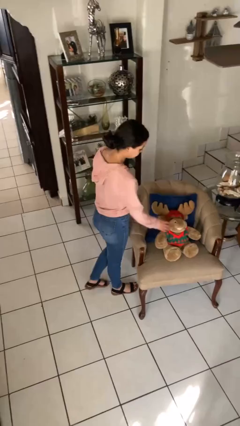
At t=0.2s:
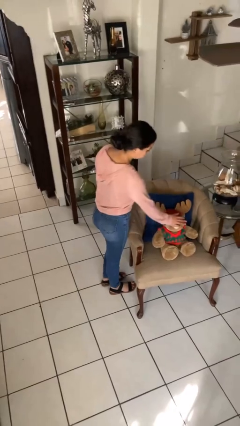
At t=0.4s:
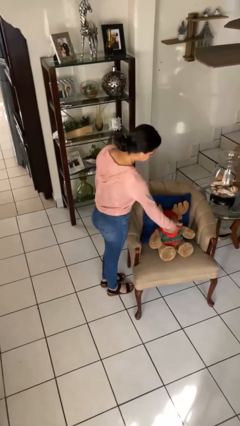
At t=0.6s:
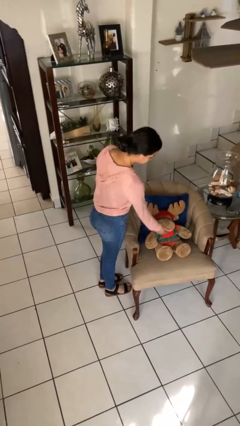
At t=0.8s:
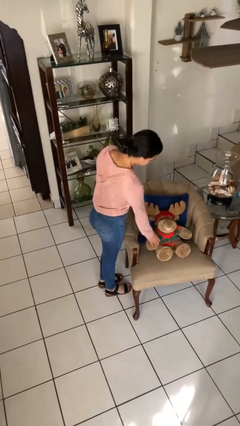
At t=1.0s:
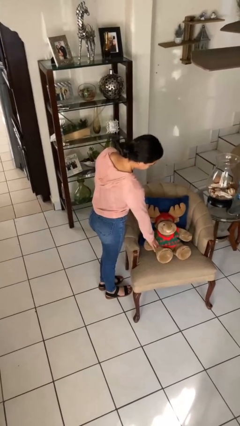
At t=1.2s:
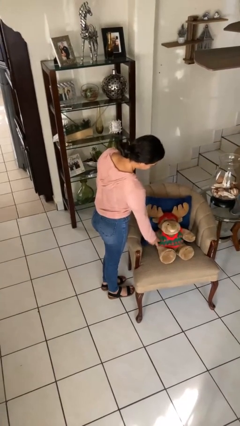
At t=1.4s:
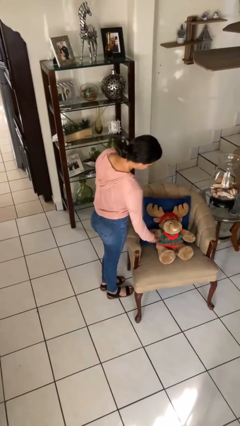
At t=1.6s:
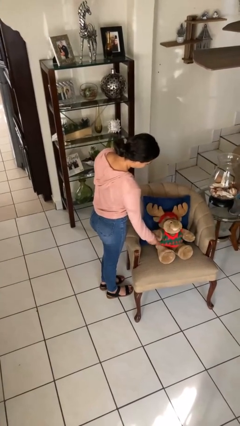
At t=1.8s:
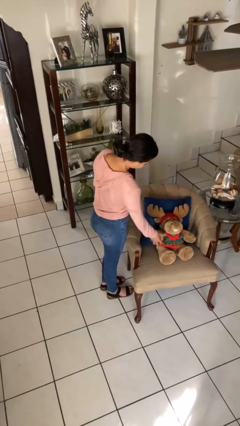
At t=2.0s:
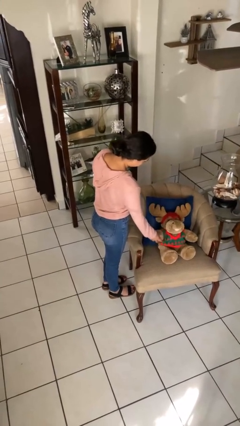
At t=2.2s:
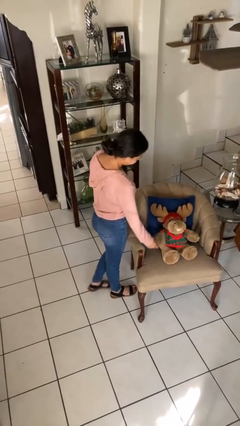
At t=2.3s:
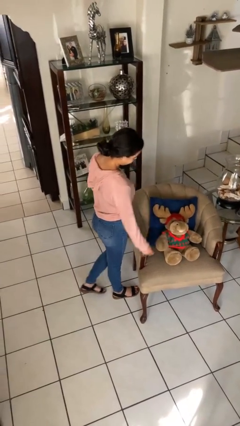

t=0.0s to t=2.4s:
person waves hand over object

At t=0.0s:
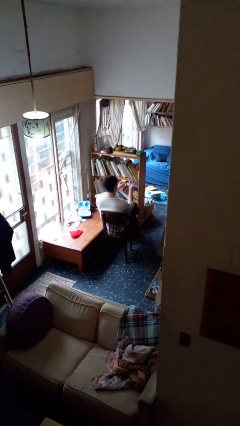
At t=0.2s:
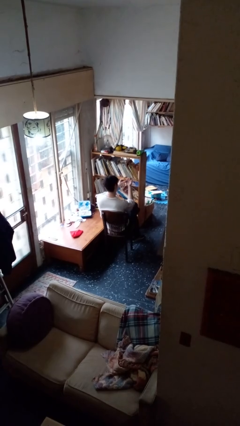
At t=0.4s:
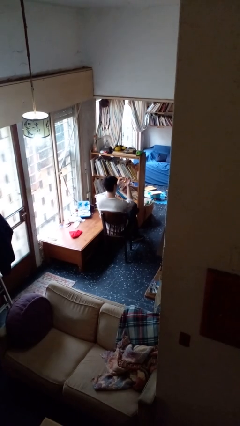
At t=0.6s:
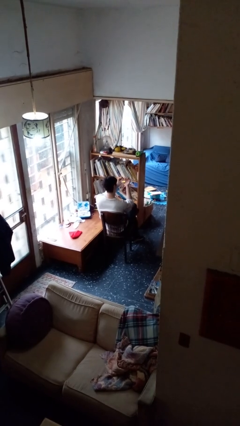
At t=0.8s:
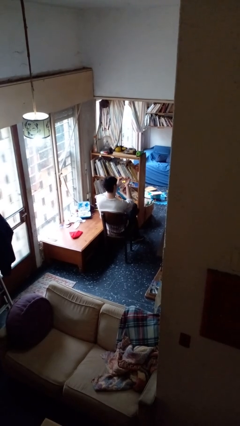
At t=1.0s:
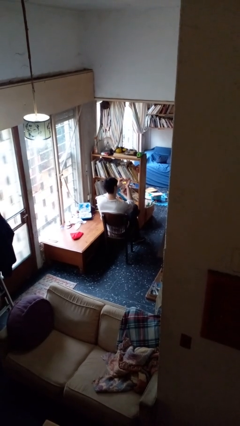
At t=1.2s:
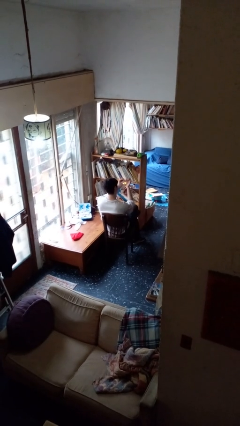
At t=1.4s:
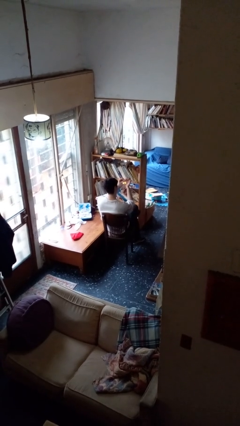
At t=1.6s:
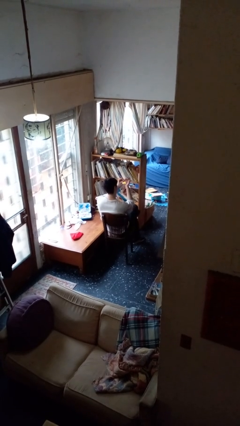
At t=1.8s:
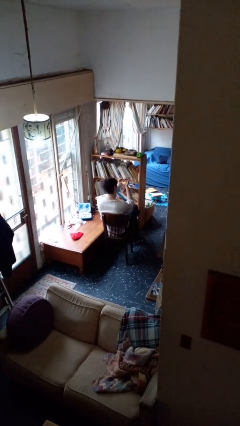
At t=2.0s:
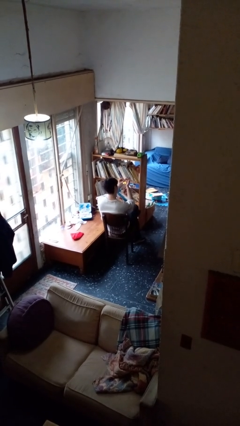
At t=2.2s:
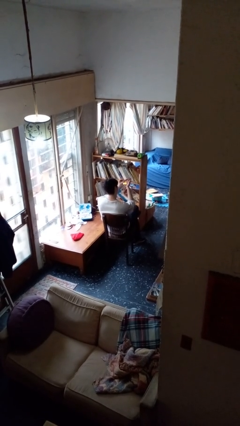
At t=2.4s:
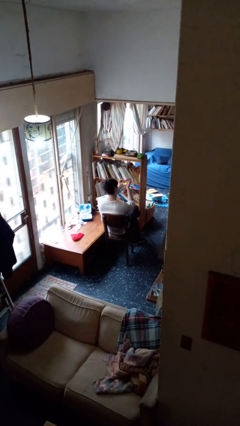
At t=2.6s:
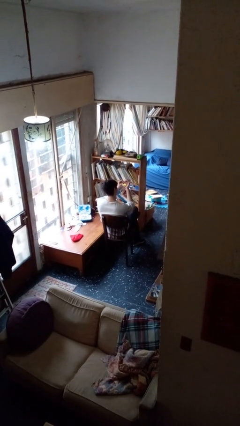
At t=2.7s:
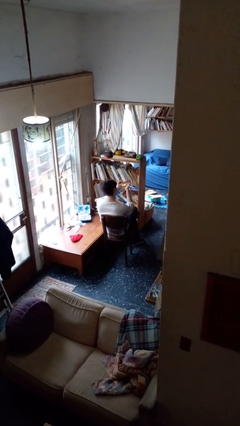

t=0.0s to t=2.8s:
person files fingernails

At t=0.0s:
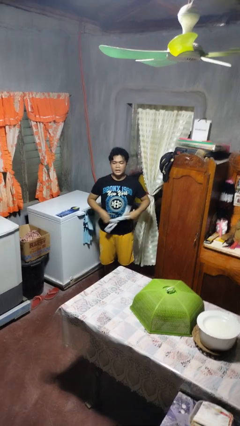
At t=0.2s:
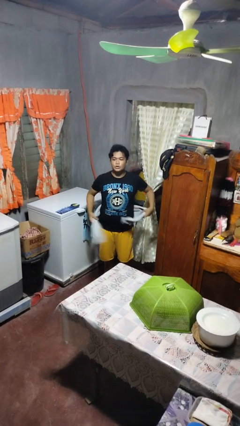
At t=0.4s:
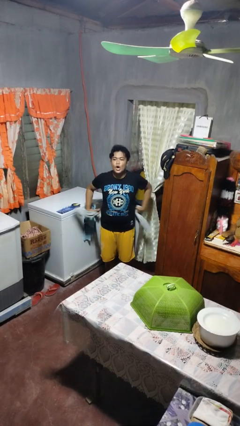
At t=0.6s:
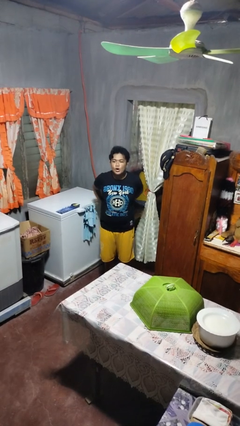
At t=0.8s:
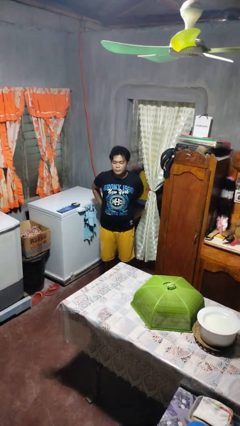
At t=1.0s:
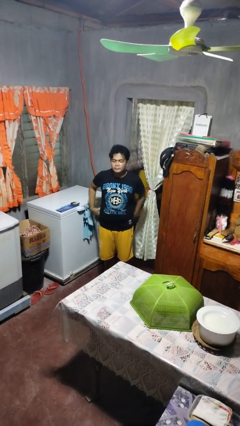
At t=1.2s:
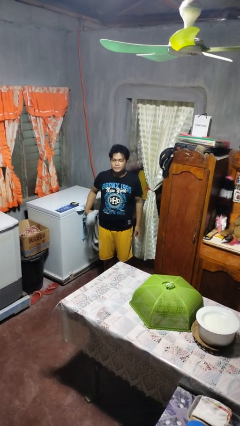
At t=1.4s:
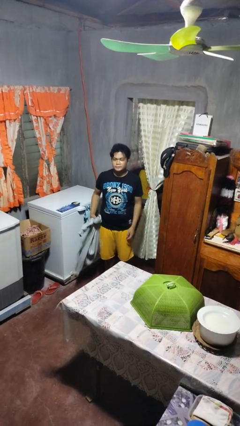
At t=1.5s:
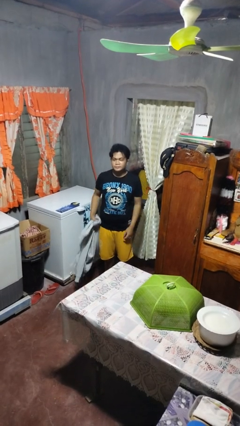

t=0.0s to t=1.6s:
person unties jacket around waist

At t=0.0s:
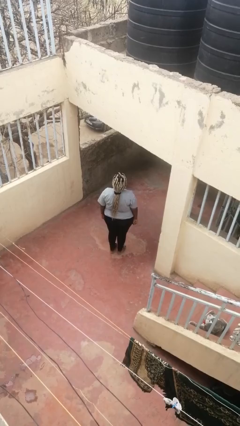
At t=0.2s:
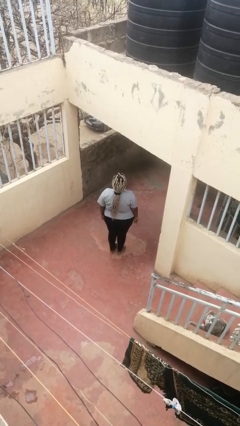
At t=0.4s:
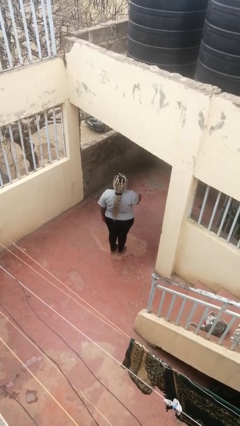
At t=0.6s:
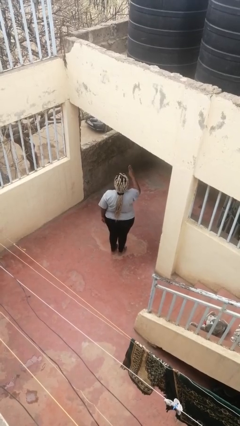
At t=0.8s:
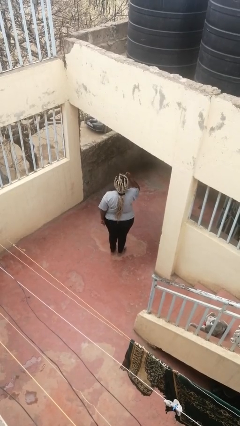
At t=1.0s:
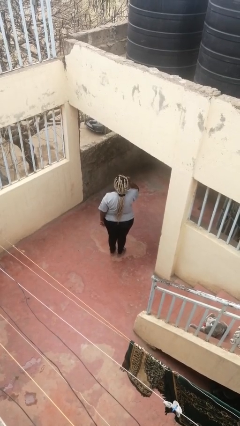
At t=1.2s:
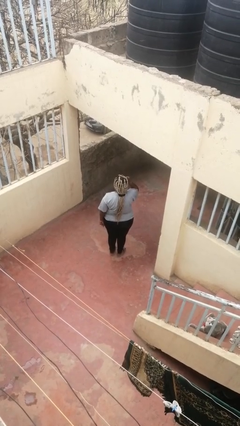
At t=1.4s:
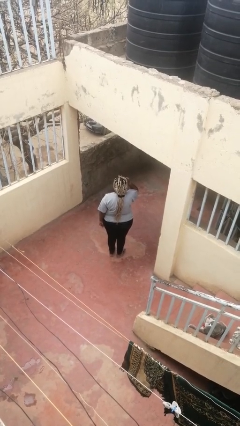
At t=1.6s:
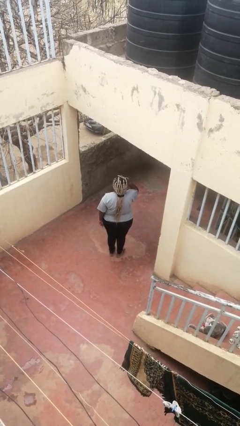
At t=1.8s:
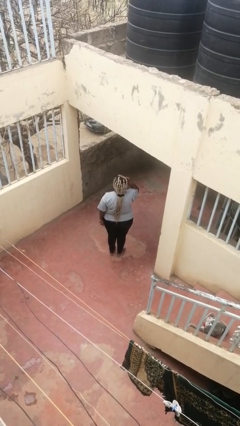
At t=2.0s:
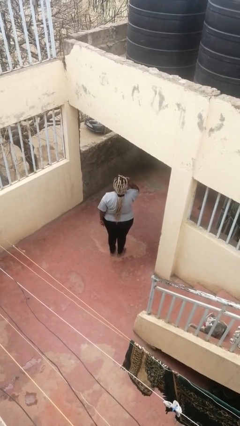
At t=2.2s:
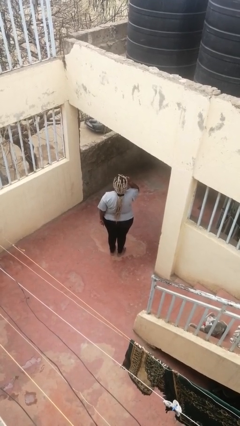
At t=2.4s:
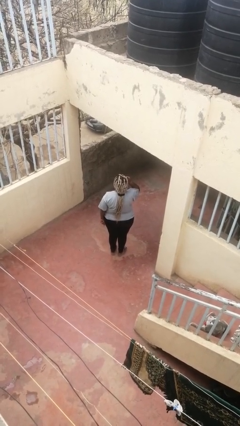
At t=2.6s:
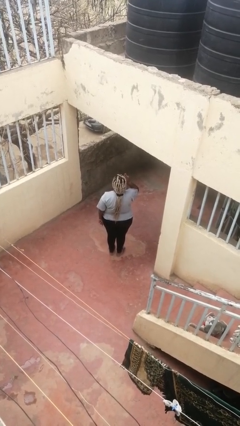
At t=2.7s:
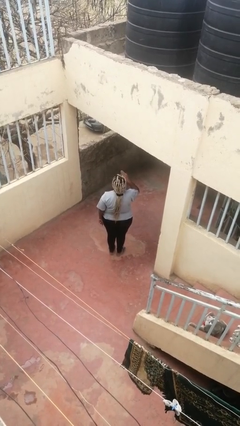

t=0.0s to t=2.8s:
person salutes

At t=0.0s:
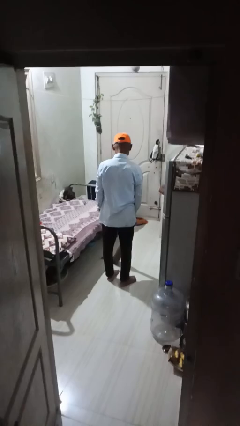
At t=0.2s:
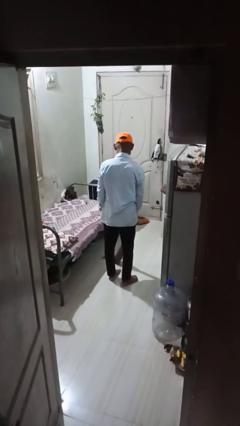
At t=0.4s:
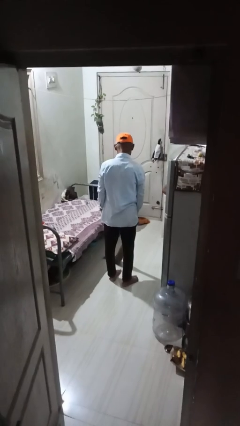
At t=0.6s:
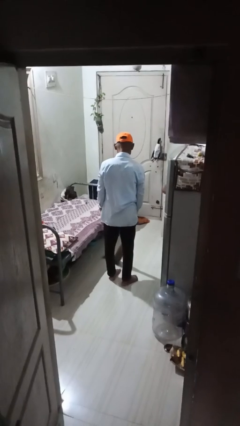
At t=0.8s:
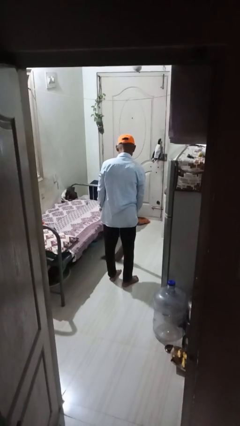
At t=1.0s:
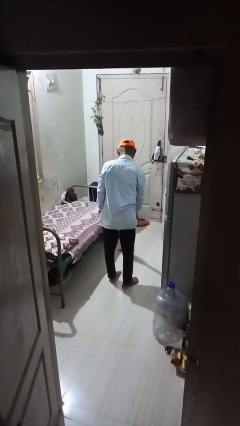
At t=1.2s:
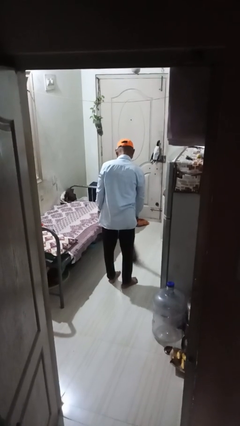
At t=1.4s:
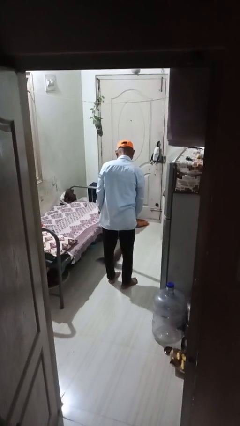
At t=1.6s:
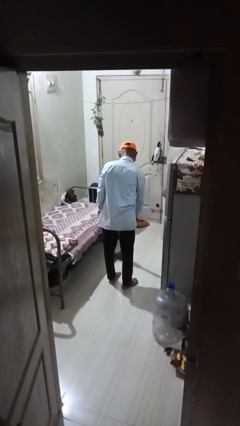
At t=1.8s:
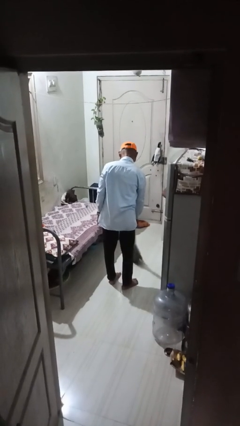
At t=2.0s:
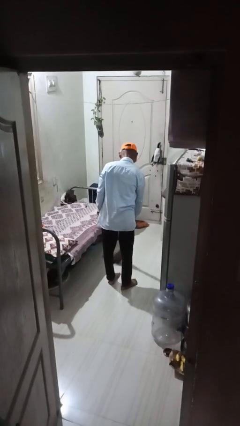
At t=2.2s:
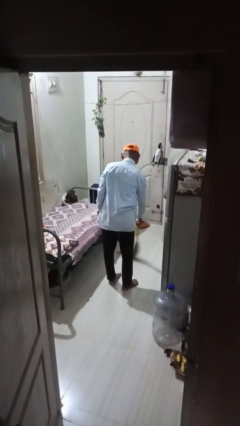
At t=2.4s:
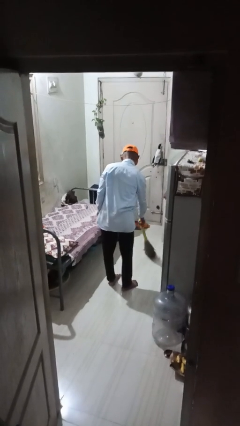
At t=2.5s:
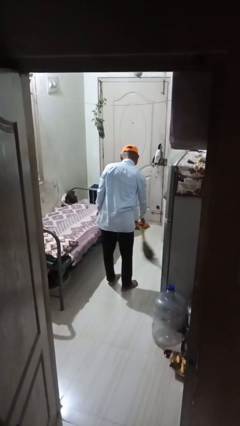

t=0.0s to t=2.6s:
person mops

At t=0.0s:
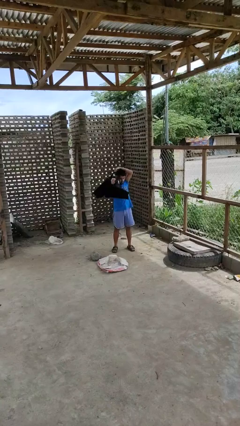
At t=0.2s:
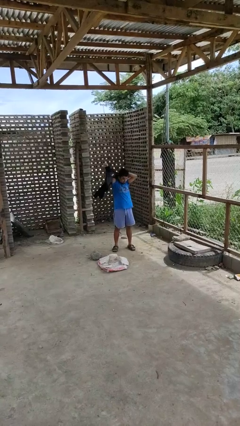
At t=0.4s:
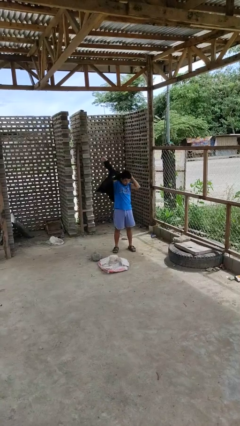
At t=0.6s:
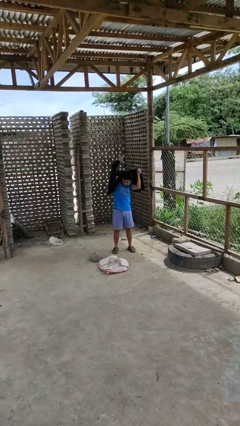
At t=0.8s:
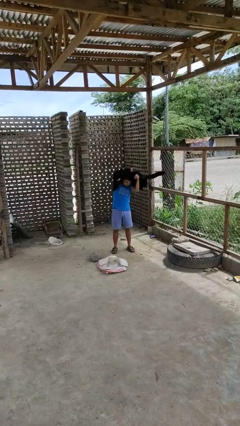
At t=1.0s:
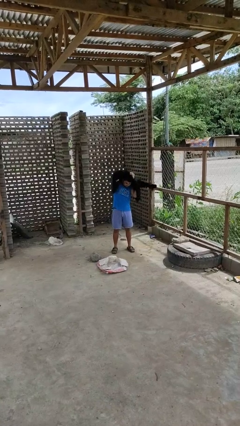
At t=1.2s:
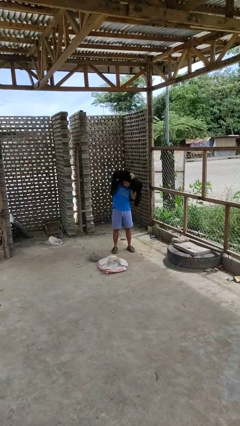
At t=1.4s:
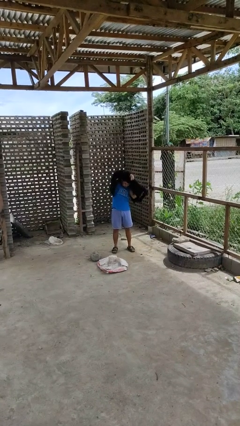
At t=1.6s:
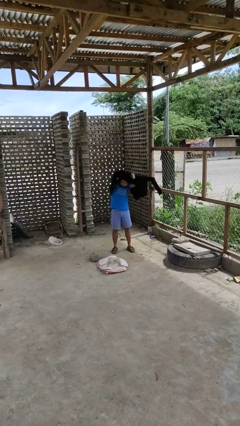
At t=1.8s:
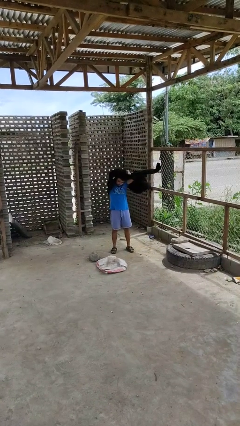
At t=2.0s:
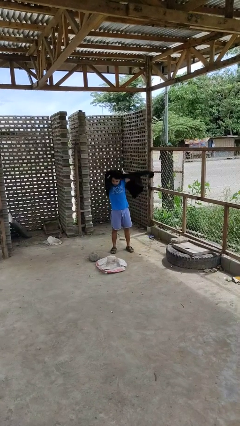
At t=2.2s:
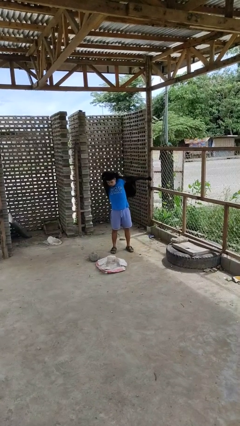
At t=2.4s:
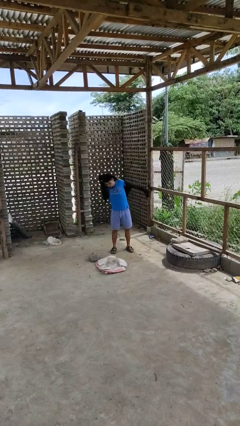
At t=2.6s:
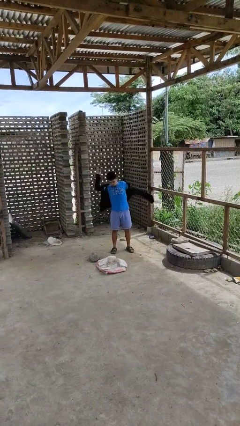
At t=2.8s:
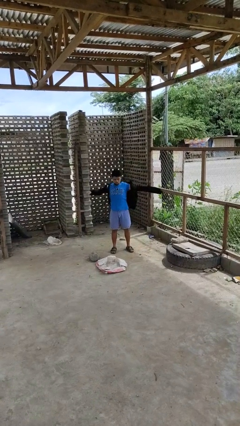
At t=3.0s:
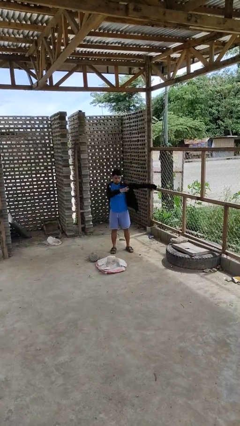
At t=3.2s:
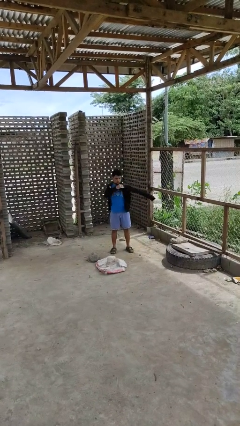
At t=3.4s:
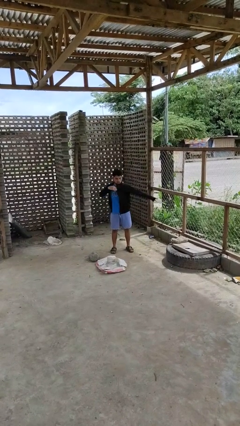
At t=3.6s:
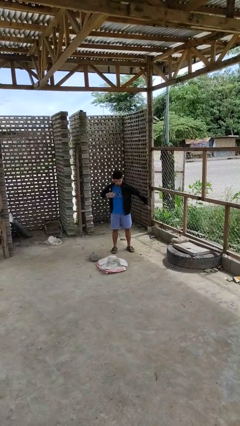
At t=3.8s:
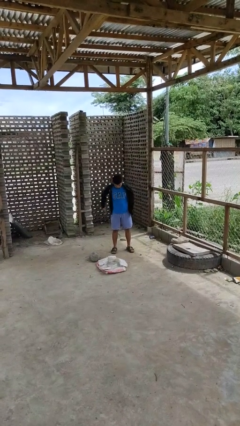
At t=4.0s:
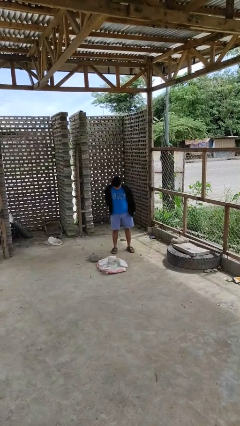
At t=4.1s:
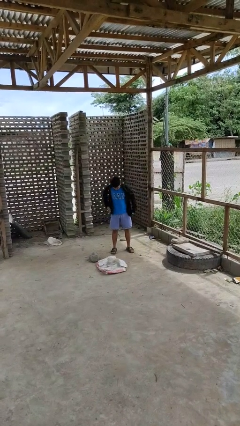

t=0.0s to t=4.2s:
person puts on jacket

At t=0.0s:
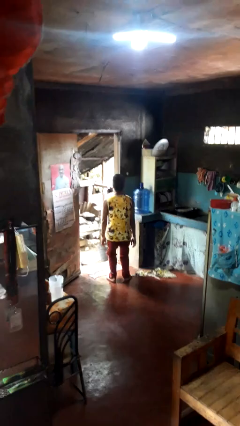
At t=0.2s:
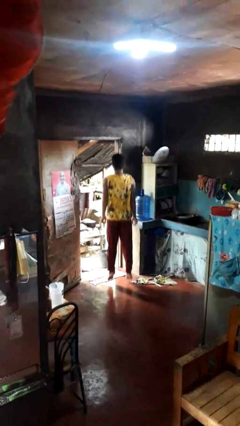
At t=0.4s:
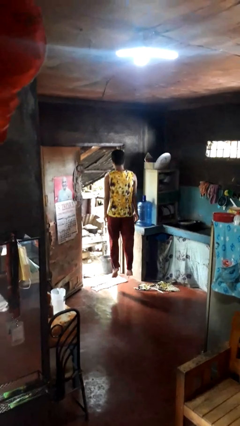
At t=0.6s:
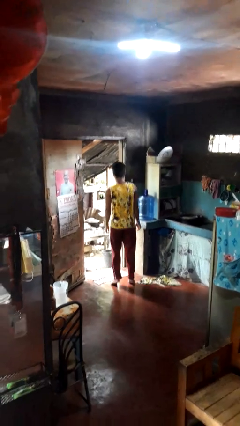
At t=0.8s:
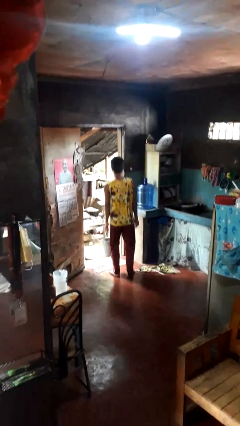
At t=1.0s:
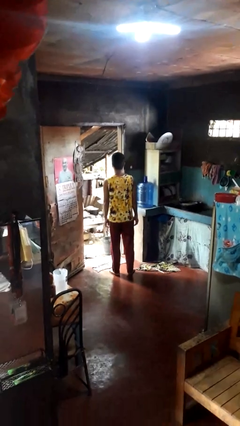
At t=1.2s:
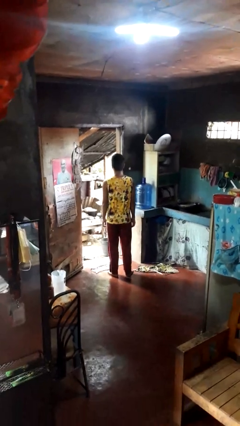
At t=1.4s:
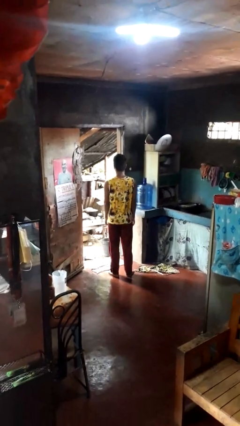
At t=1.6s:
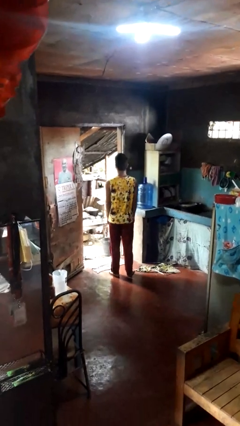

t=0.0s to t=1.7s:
person jumps
